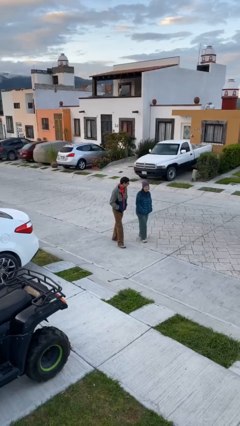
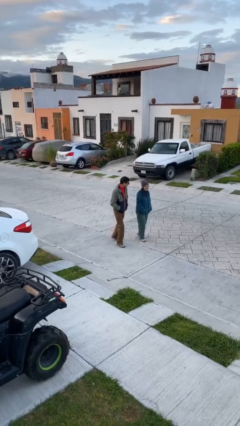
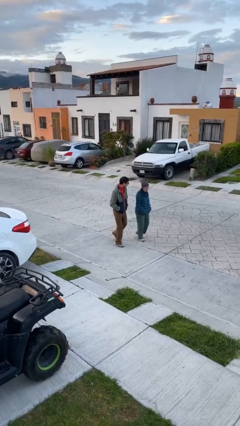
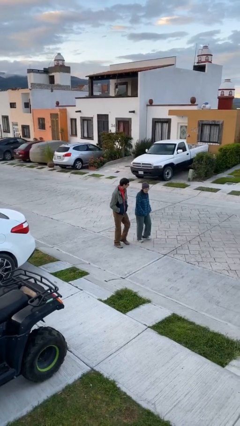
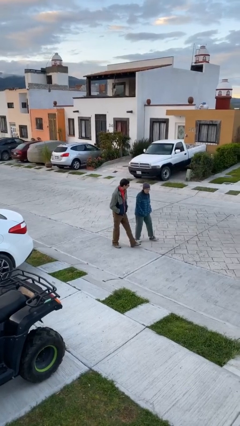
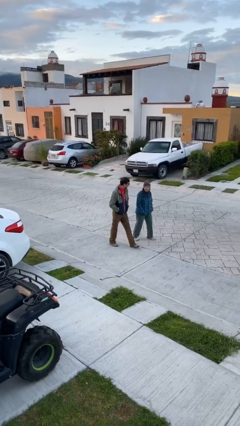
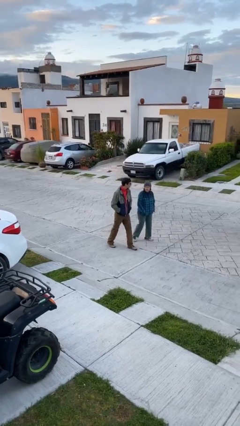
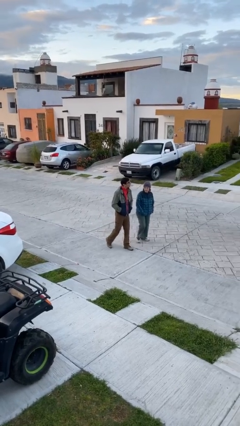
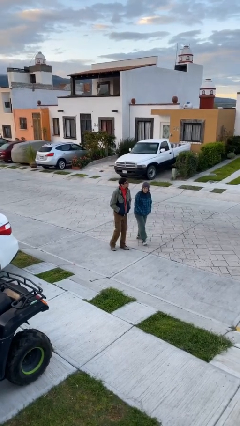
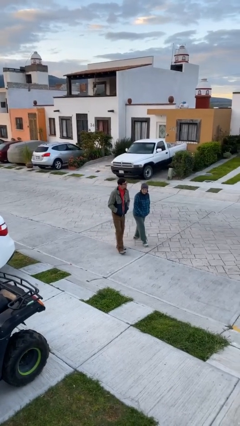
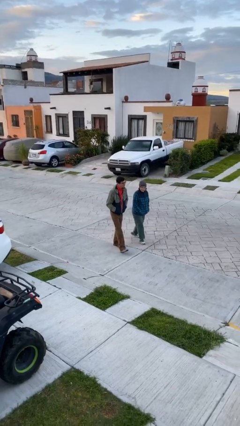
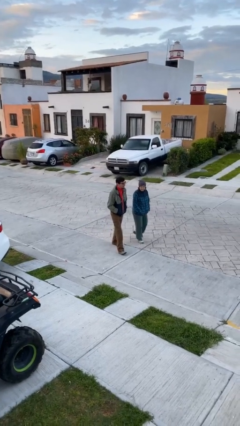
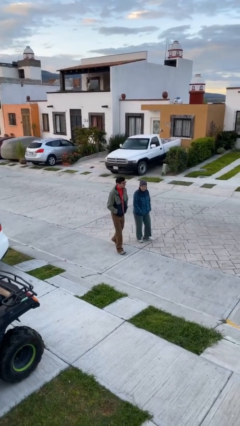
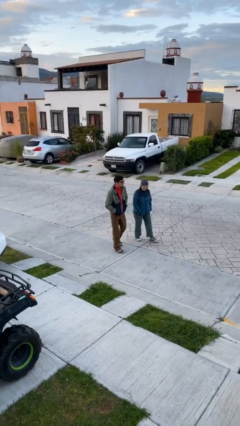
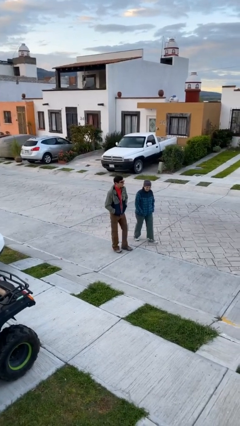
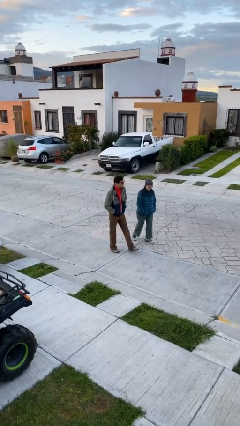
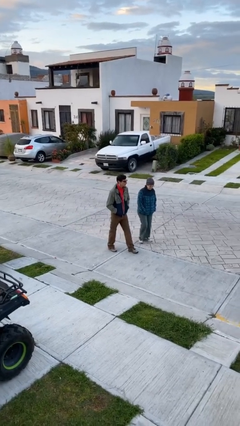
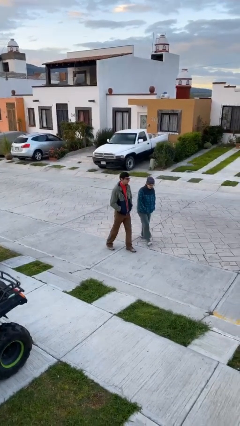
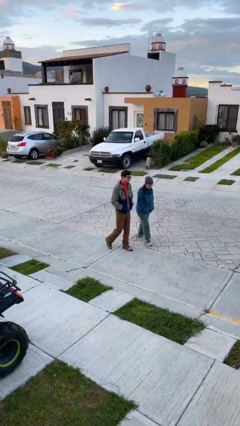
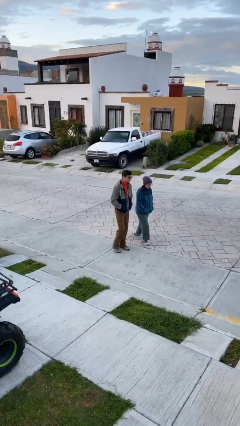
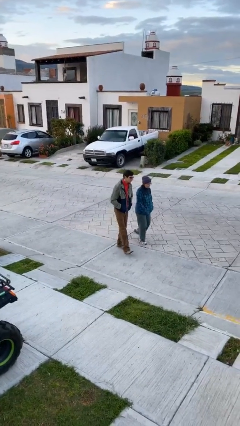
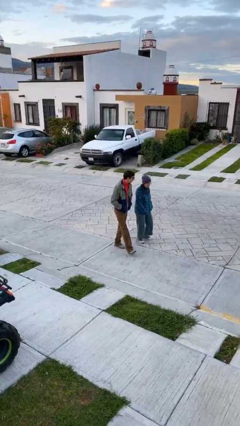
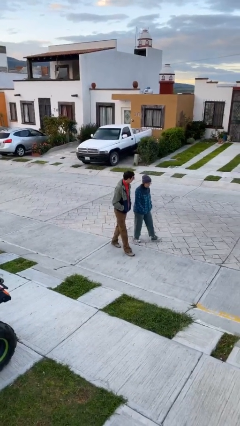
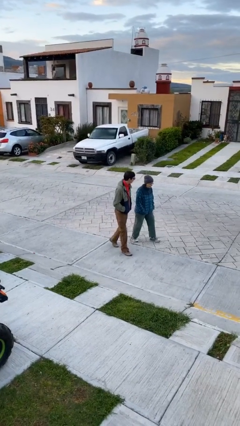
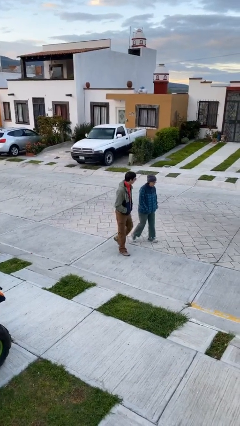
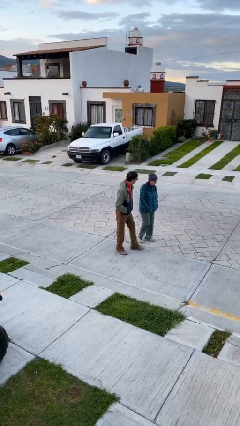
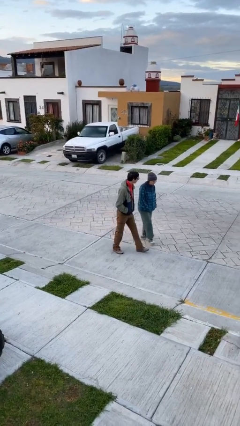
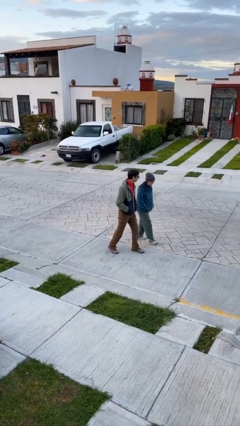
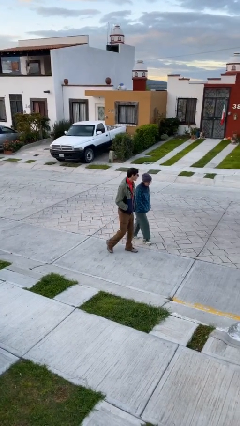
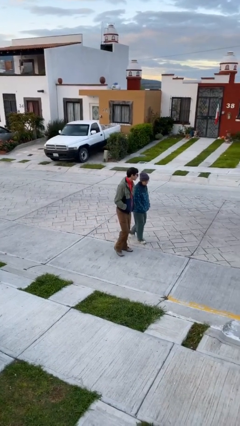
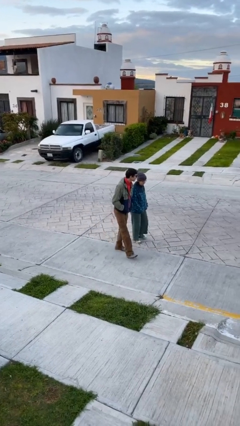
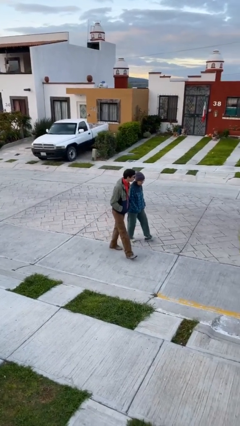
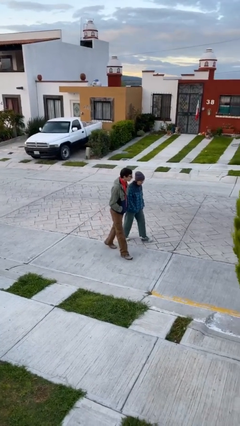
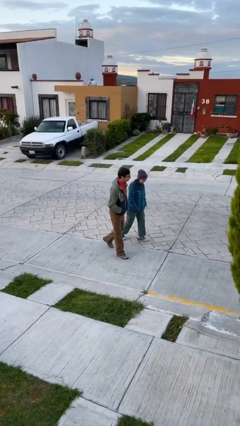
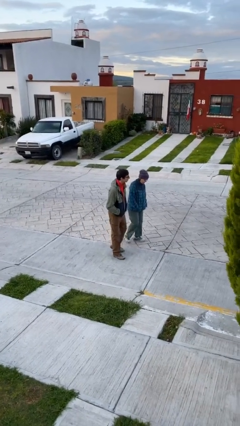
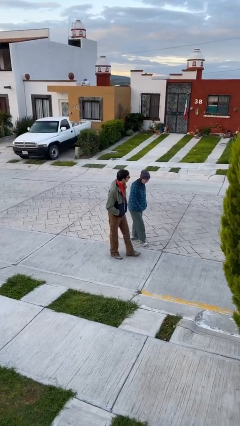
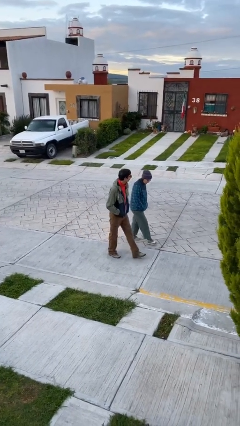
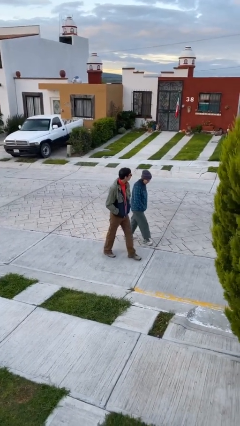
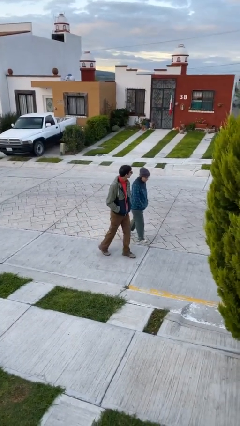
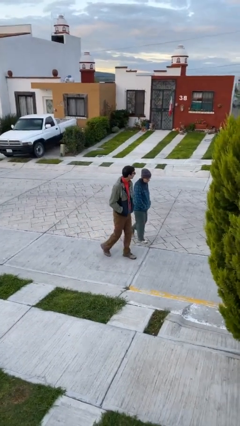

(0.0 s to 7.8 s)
person talks to person

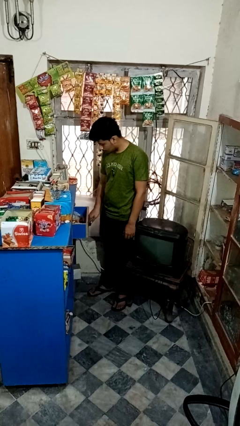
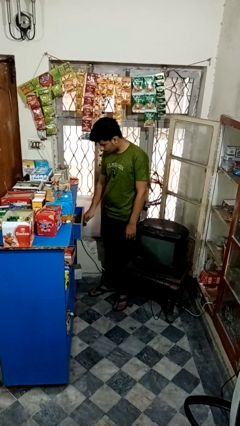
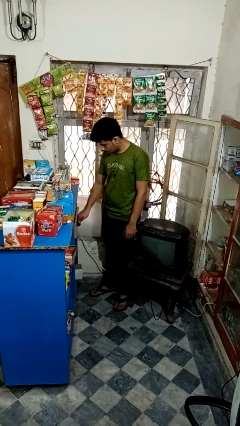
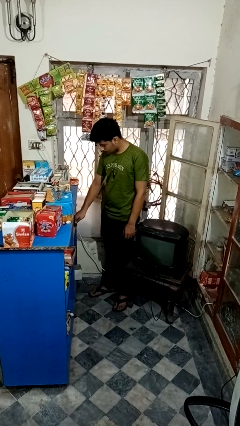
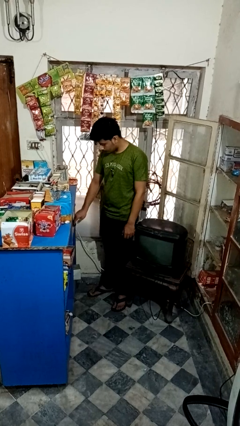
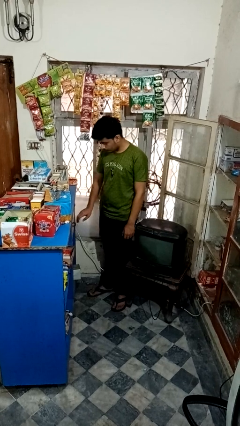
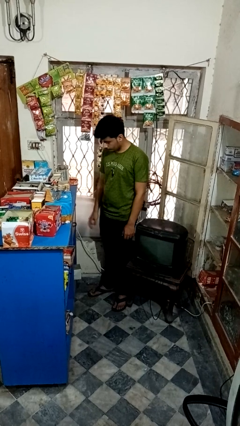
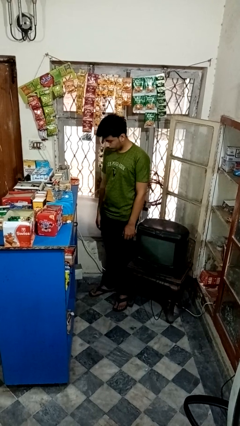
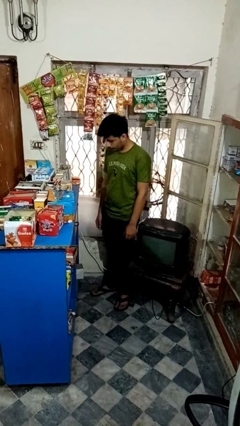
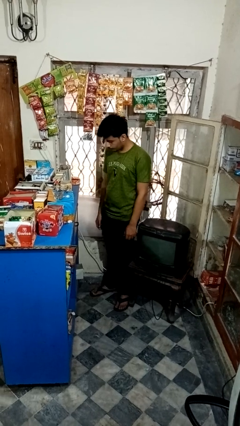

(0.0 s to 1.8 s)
person closes kitchen drawer

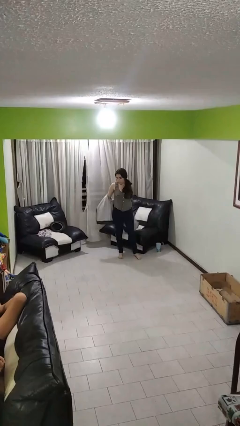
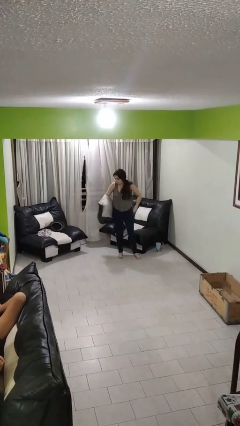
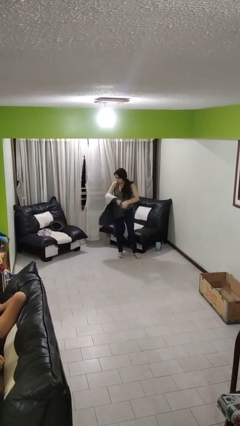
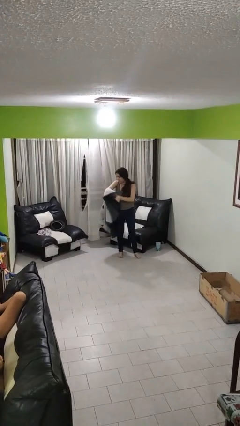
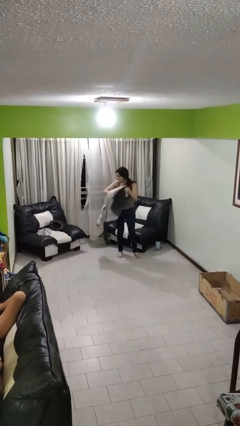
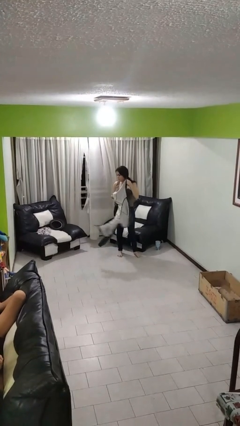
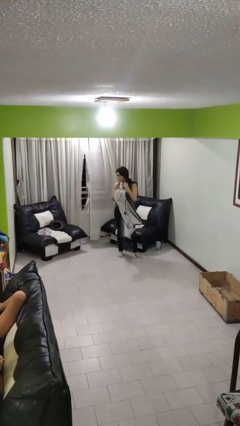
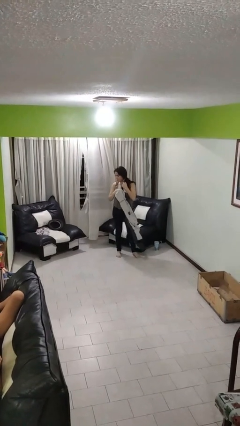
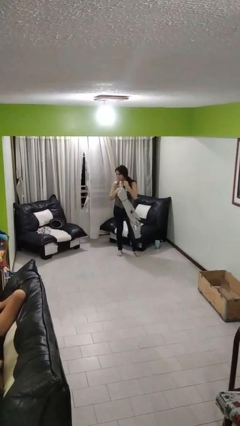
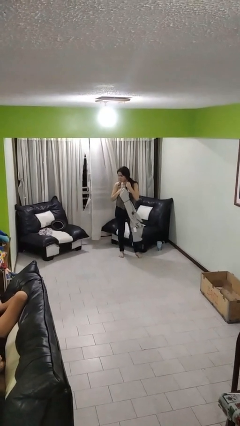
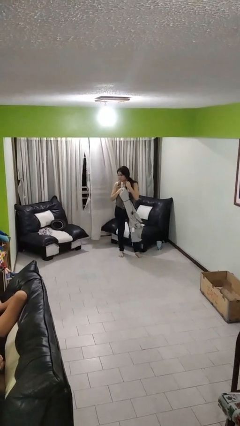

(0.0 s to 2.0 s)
person takes off jacket

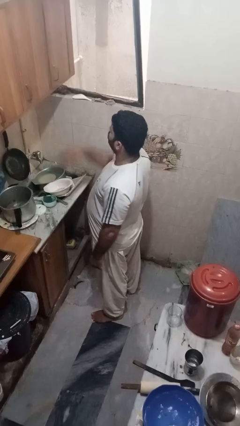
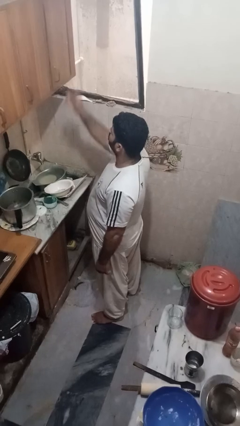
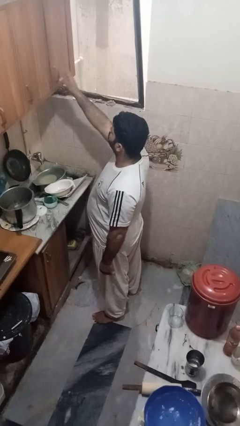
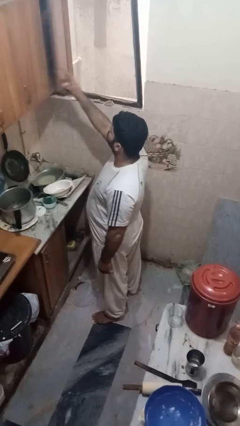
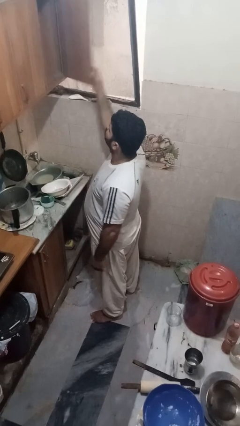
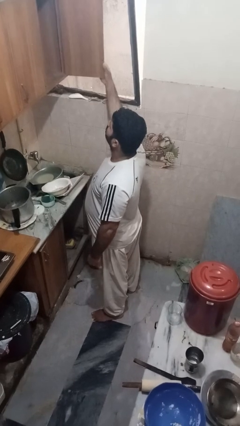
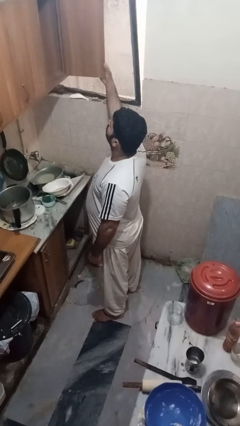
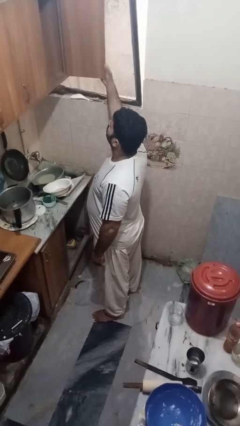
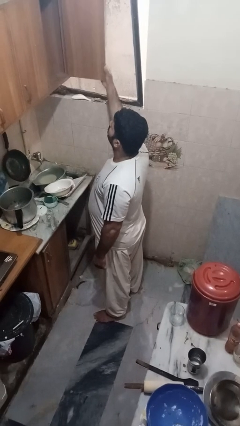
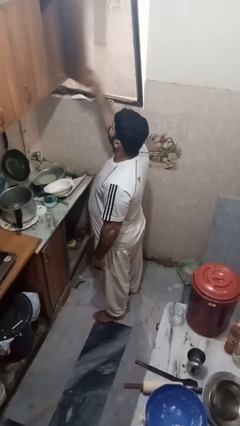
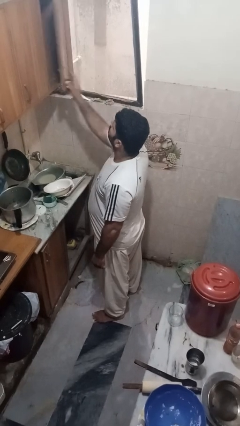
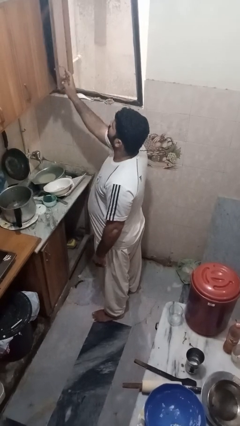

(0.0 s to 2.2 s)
person opens cabinet

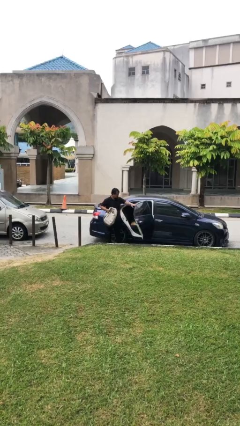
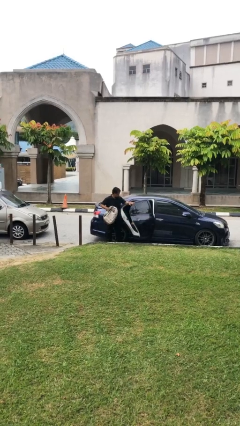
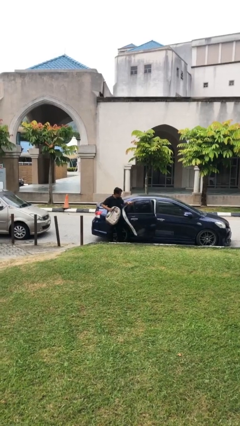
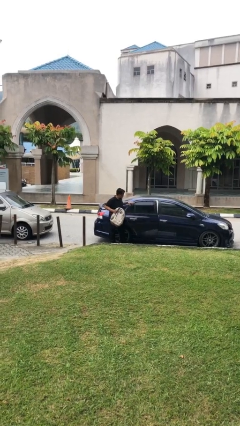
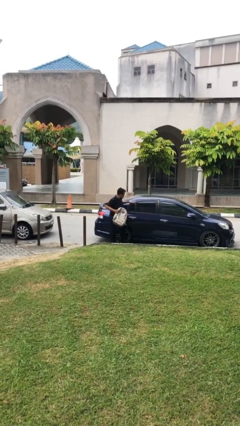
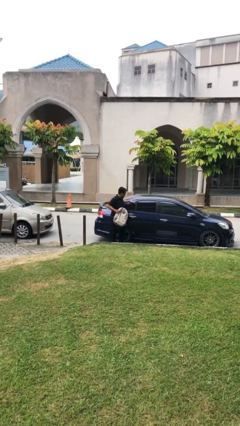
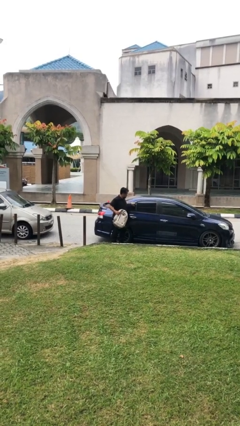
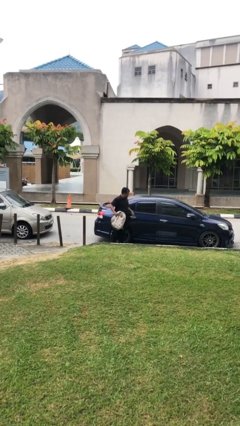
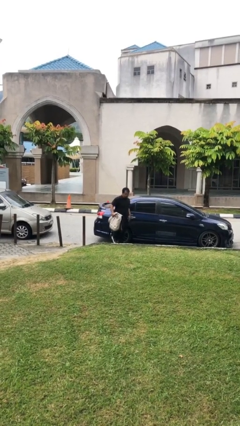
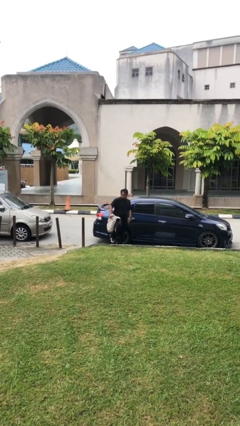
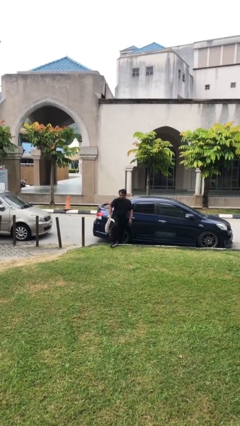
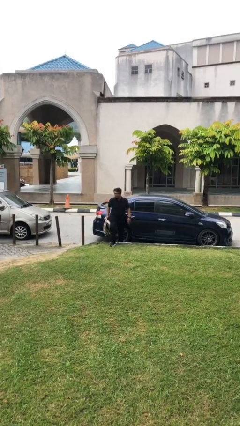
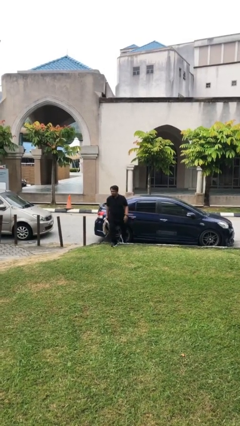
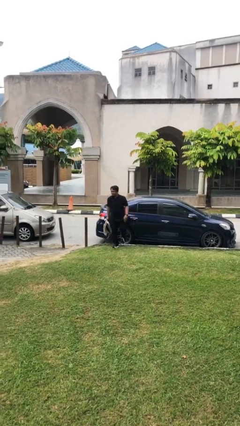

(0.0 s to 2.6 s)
person closes car door

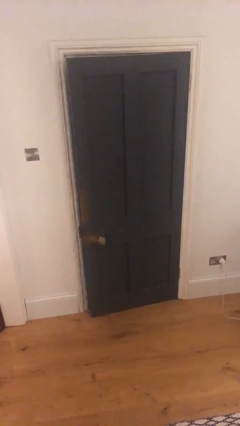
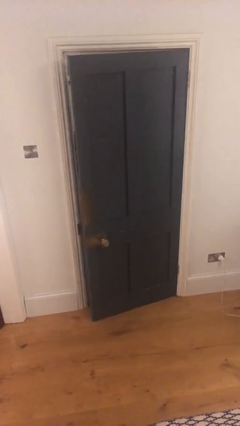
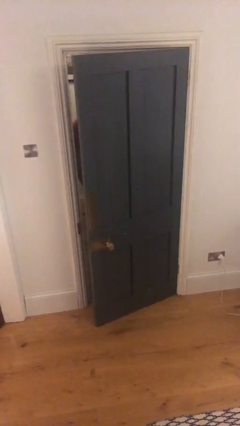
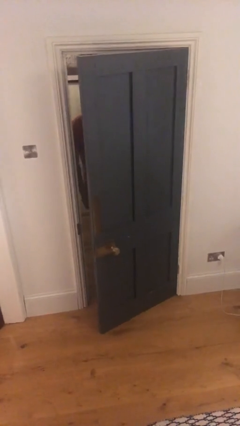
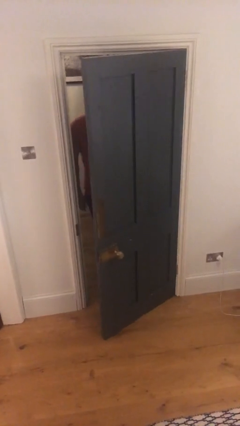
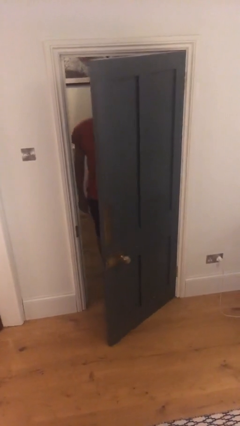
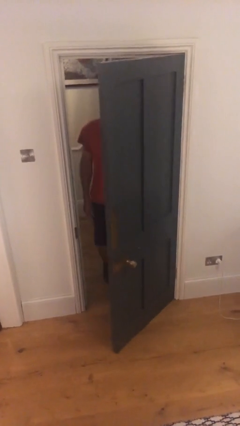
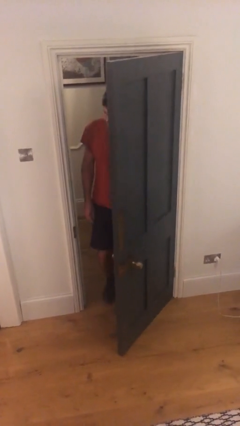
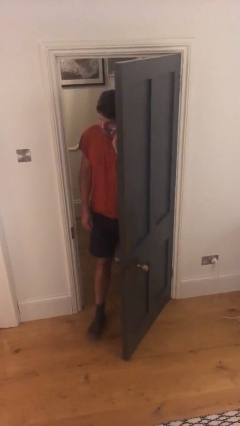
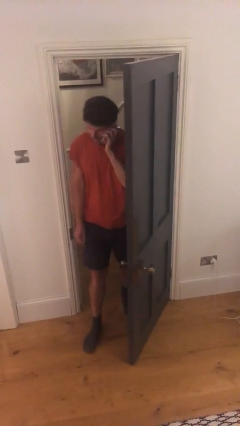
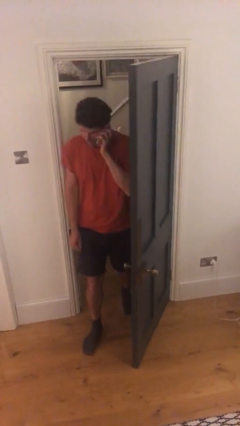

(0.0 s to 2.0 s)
person opens facility door
